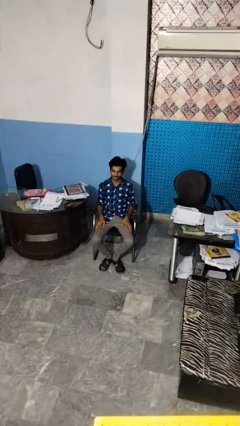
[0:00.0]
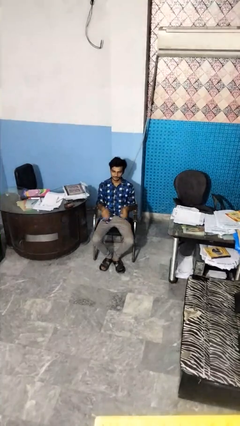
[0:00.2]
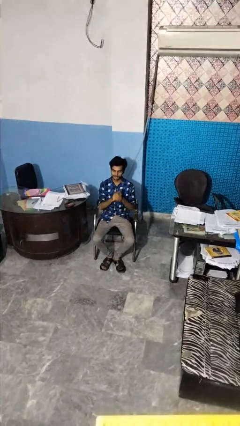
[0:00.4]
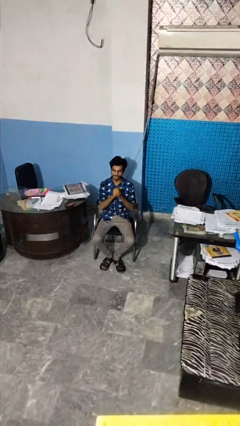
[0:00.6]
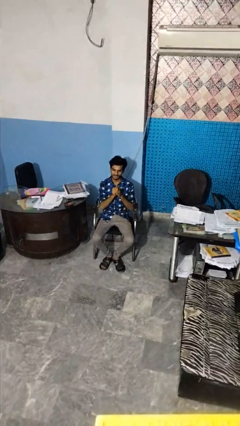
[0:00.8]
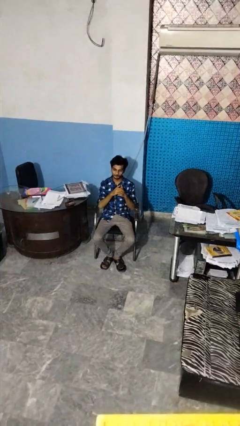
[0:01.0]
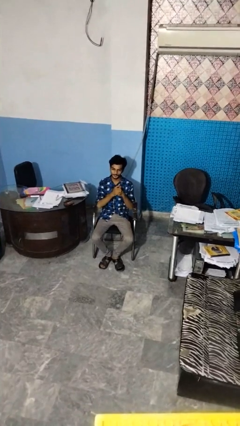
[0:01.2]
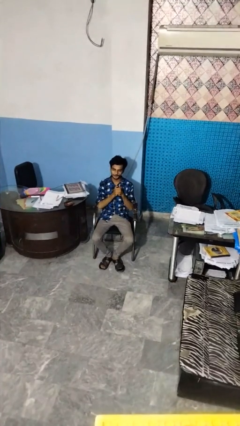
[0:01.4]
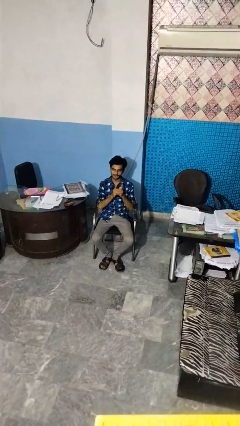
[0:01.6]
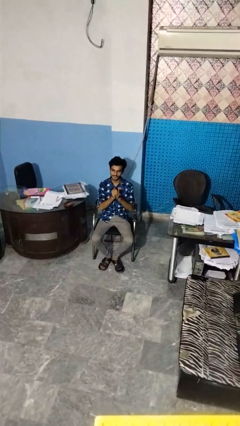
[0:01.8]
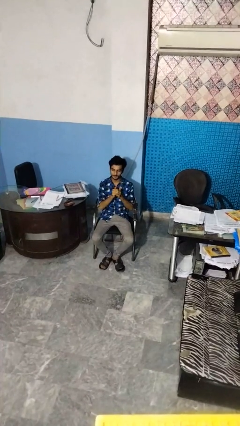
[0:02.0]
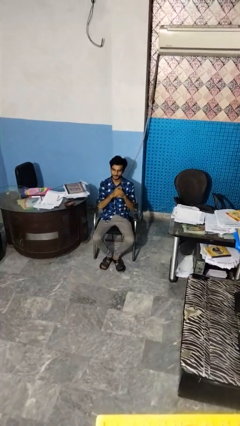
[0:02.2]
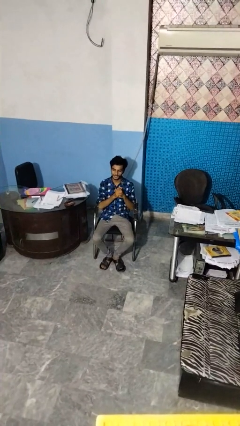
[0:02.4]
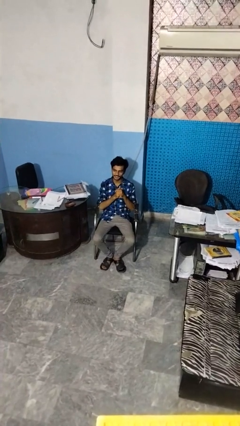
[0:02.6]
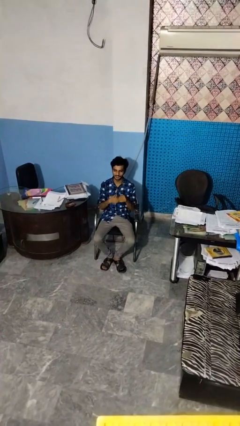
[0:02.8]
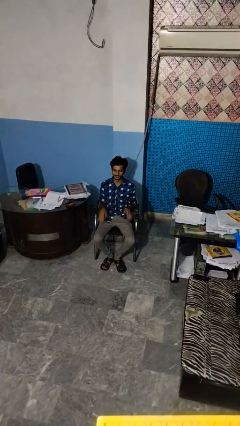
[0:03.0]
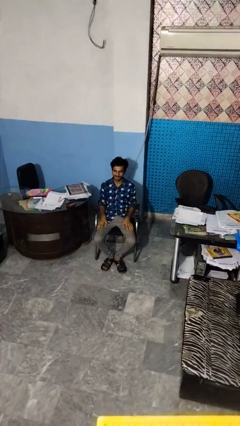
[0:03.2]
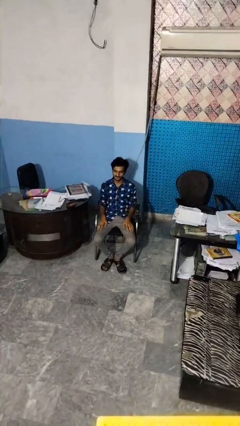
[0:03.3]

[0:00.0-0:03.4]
person cracks knuckles

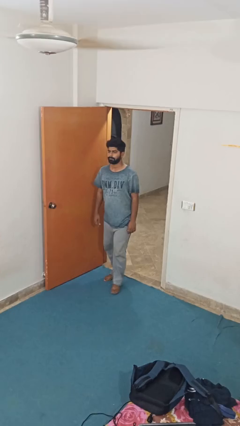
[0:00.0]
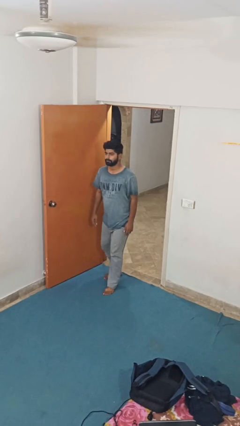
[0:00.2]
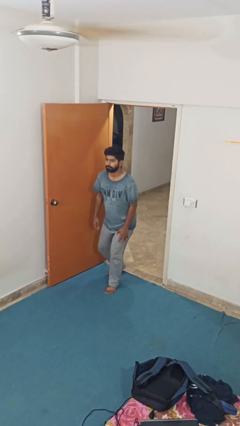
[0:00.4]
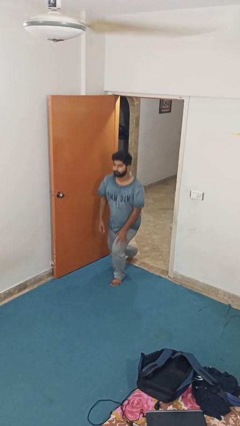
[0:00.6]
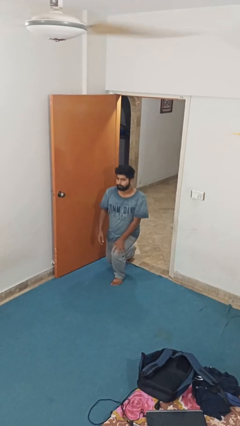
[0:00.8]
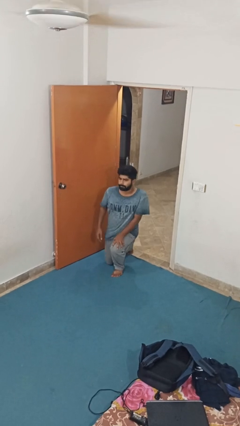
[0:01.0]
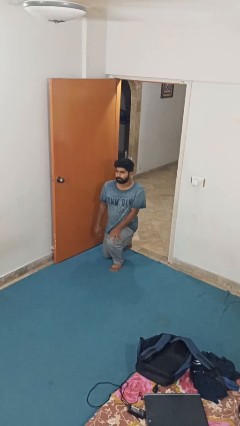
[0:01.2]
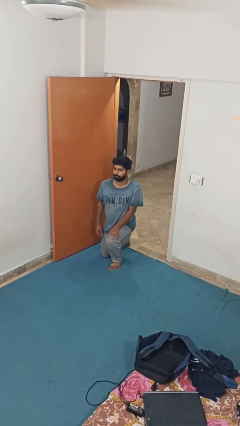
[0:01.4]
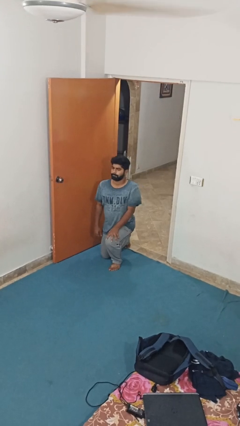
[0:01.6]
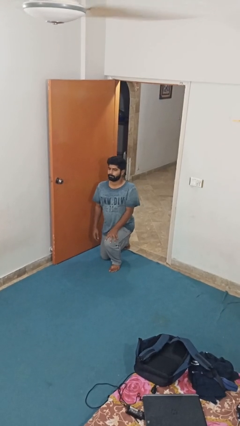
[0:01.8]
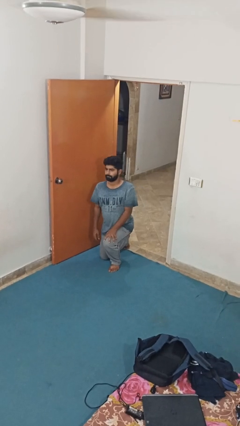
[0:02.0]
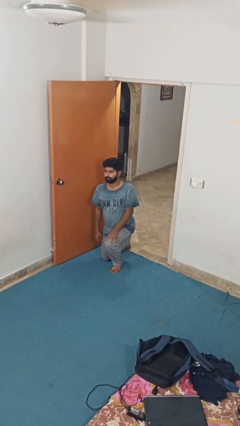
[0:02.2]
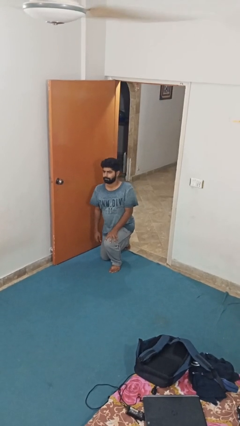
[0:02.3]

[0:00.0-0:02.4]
person kneels

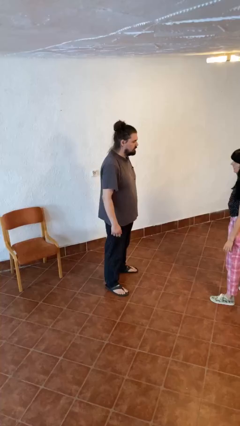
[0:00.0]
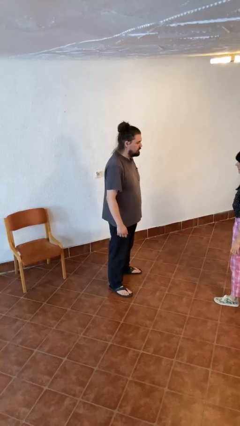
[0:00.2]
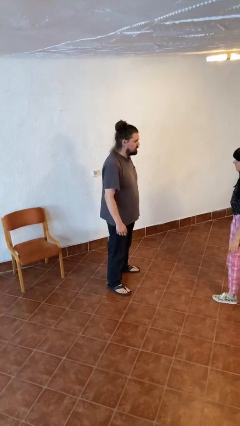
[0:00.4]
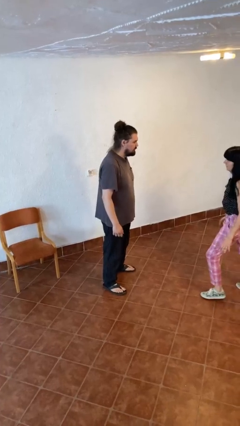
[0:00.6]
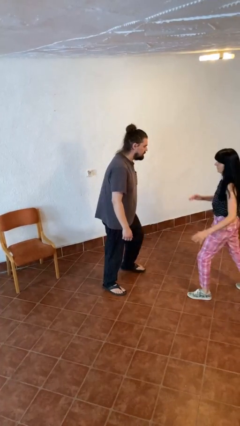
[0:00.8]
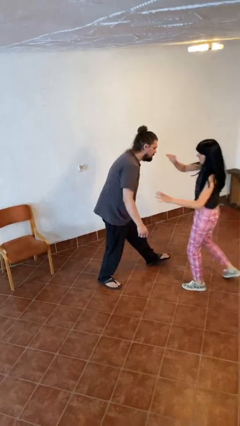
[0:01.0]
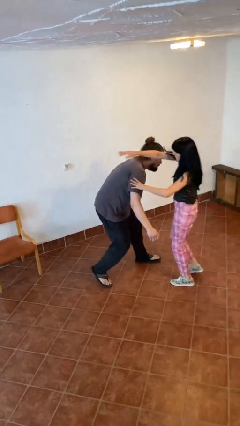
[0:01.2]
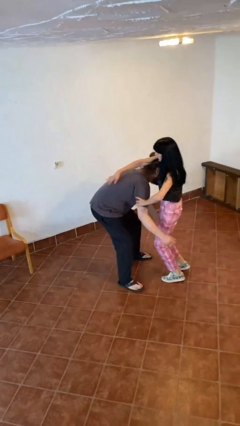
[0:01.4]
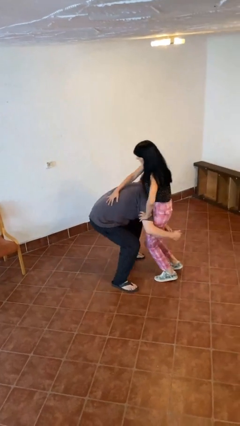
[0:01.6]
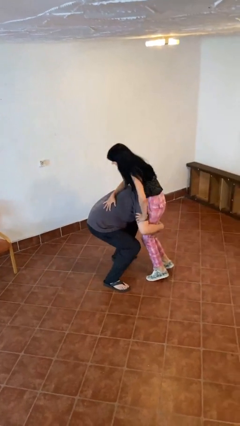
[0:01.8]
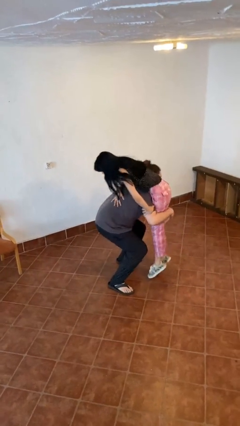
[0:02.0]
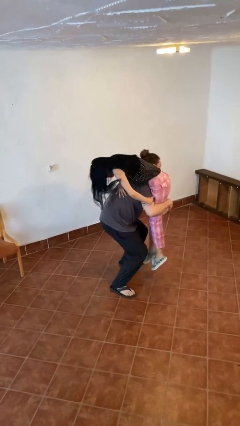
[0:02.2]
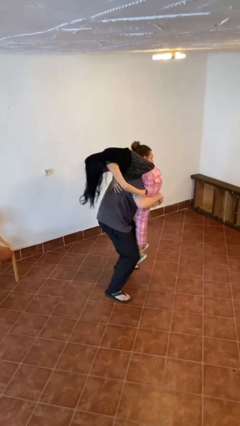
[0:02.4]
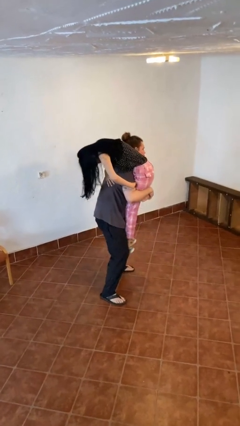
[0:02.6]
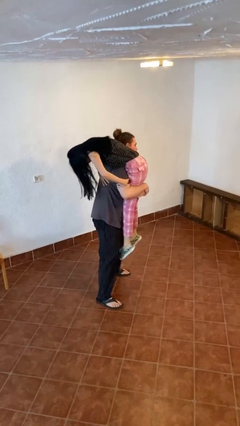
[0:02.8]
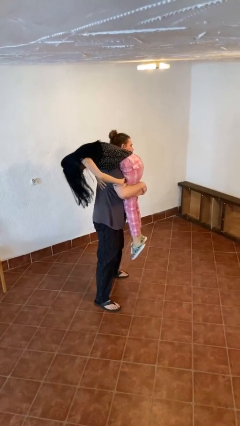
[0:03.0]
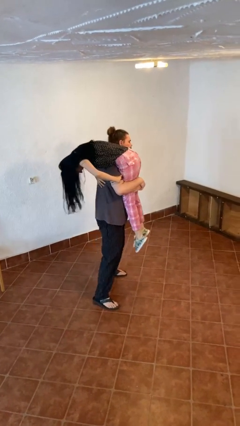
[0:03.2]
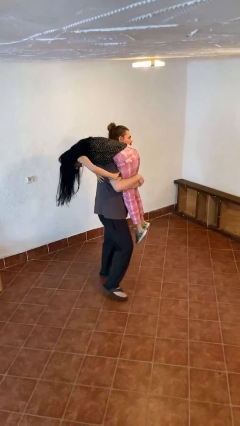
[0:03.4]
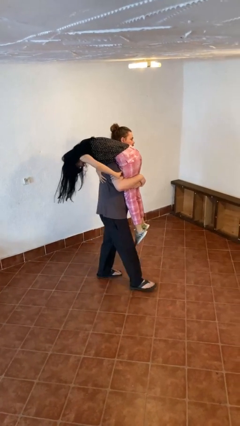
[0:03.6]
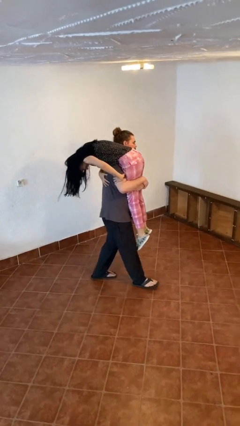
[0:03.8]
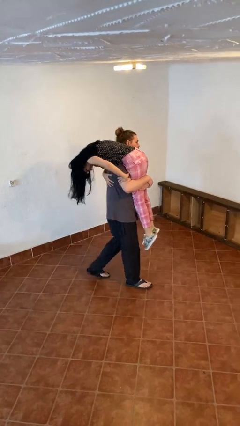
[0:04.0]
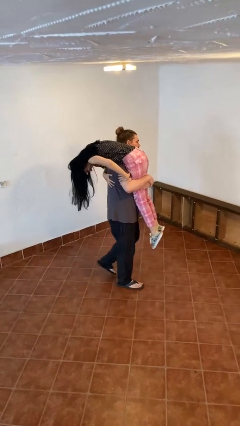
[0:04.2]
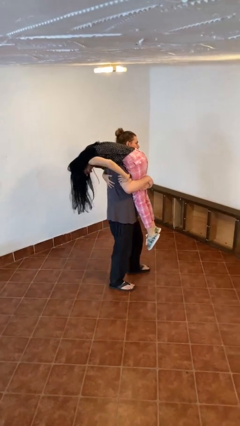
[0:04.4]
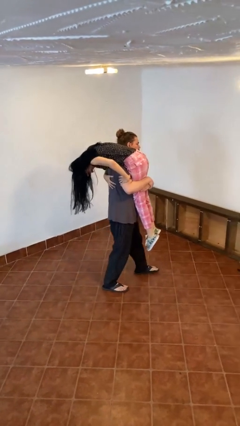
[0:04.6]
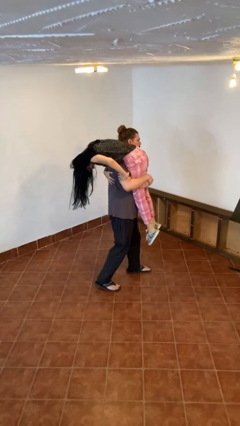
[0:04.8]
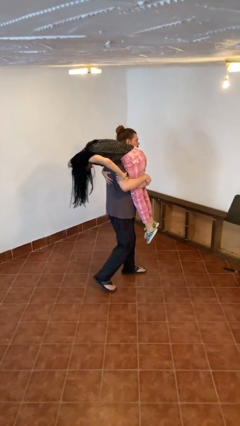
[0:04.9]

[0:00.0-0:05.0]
person carries person over shoulder

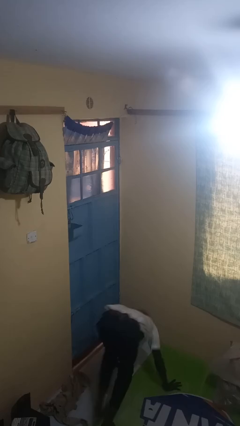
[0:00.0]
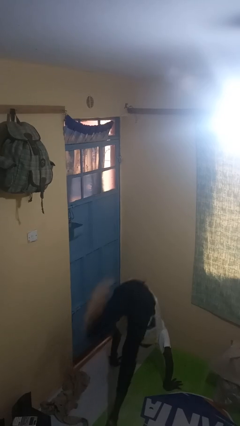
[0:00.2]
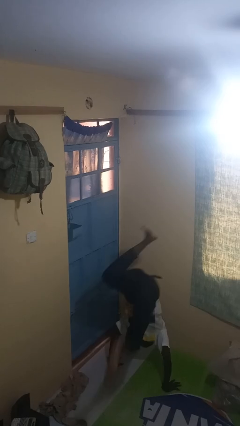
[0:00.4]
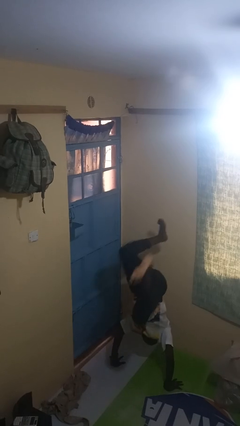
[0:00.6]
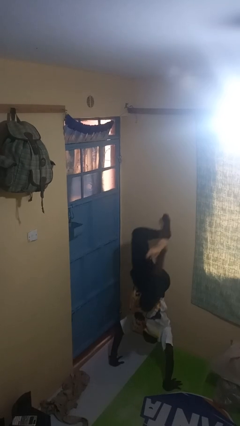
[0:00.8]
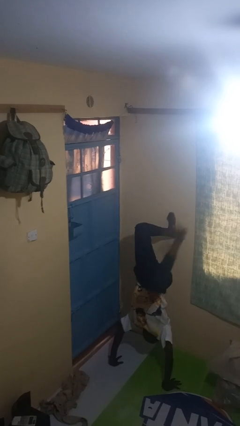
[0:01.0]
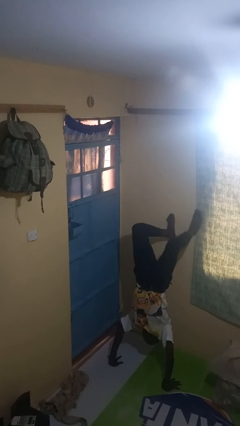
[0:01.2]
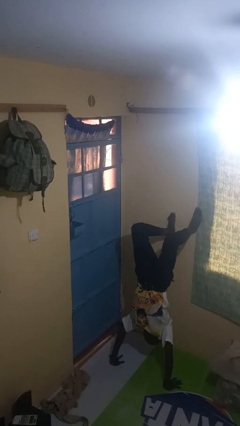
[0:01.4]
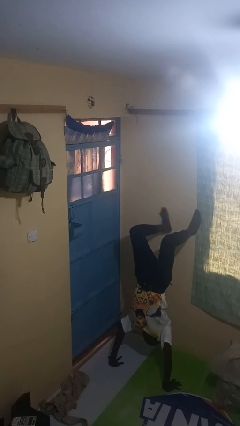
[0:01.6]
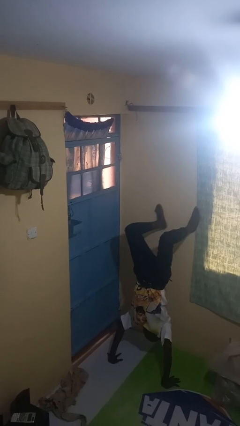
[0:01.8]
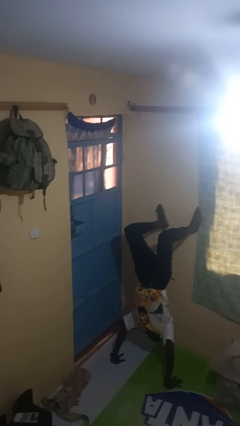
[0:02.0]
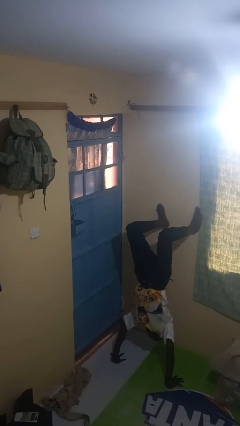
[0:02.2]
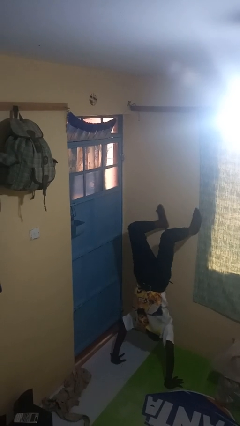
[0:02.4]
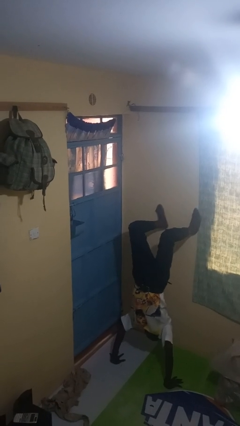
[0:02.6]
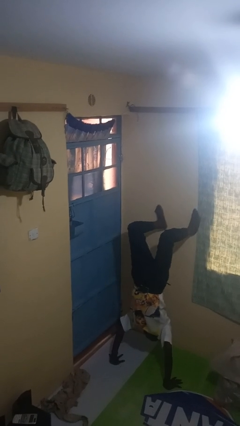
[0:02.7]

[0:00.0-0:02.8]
person handstand

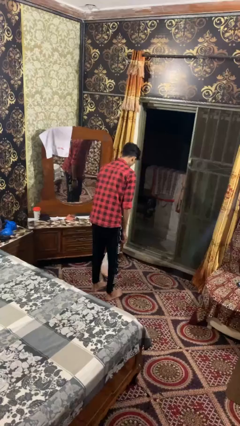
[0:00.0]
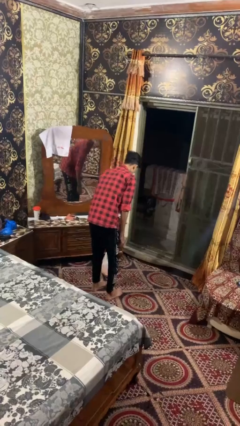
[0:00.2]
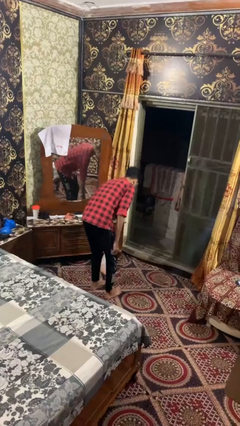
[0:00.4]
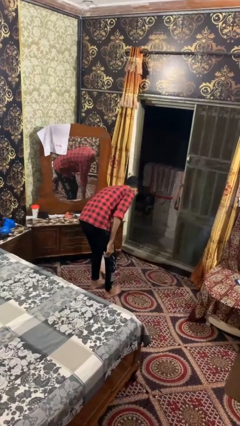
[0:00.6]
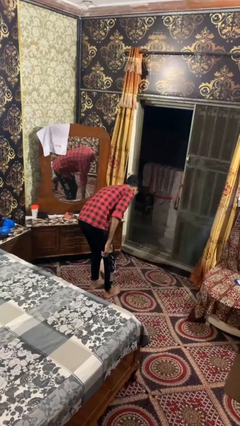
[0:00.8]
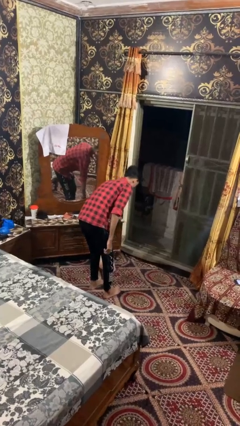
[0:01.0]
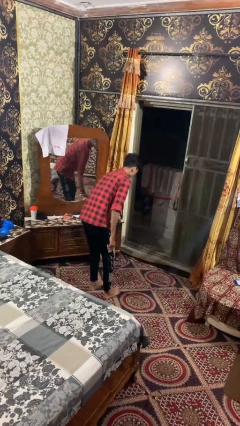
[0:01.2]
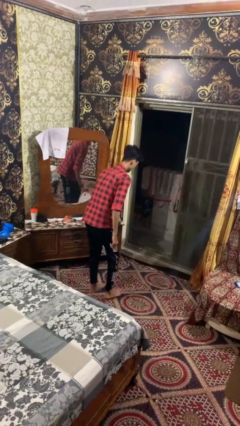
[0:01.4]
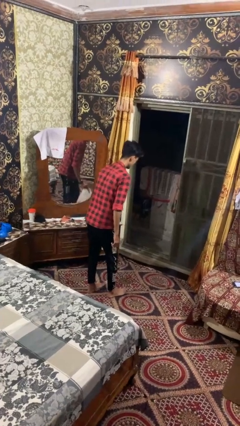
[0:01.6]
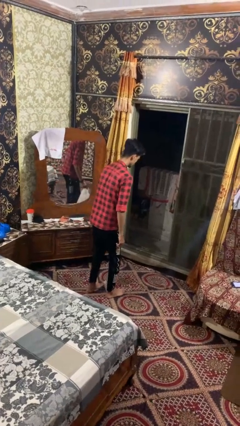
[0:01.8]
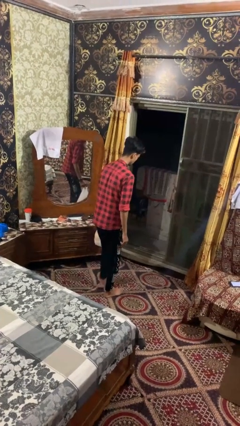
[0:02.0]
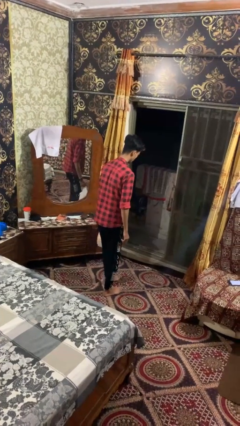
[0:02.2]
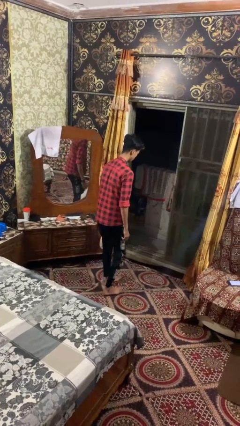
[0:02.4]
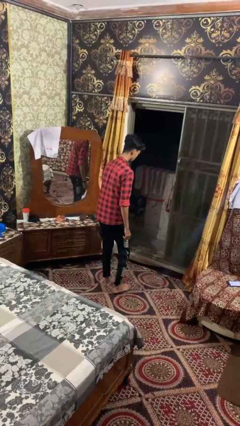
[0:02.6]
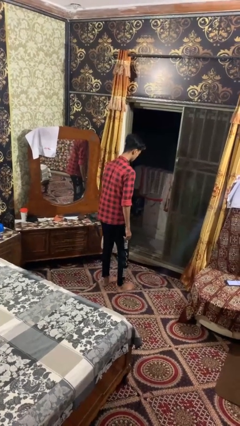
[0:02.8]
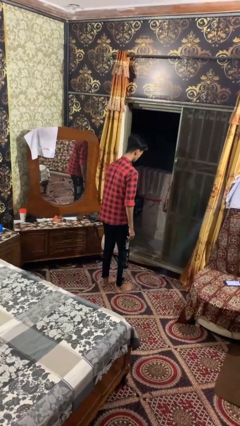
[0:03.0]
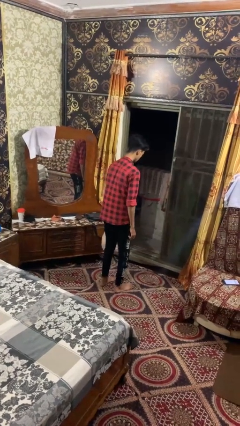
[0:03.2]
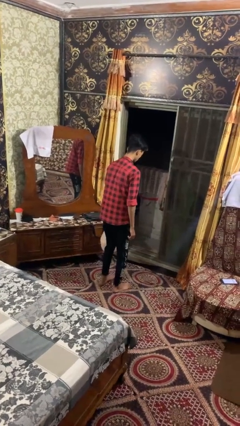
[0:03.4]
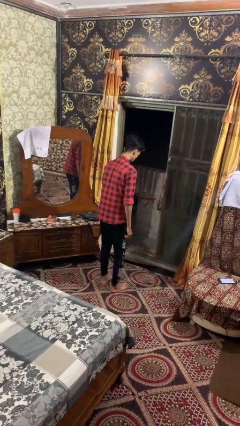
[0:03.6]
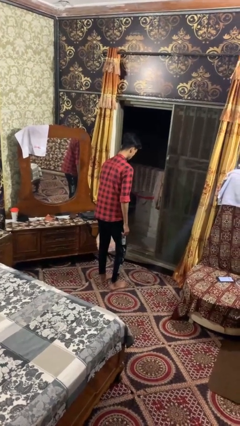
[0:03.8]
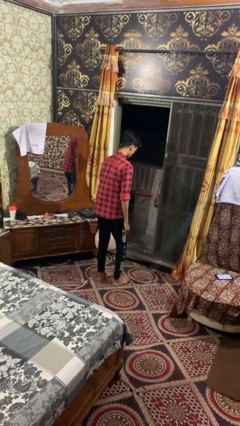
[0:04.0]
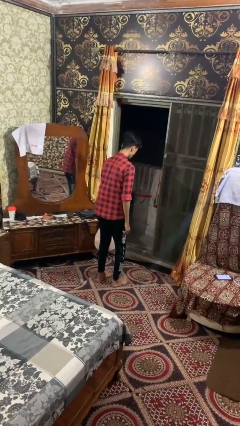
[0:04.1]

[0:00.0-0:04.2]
person carries groceries
